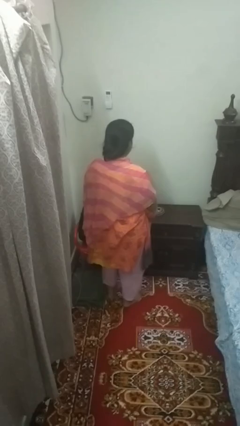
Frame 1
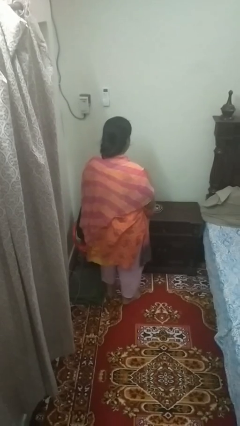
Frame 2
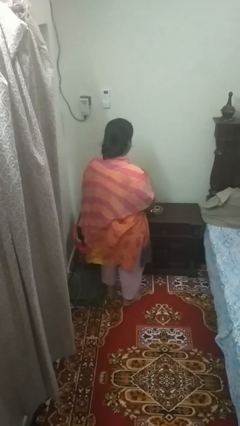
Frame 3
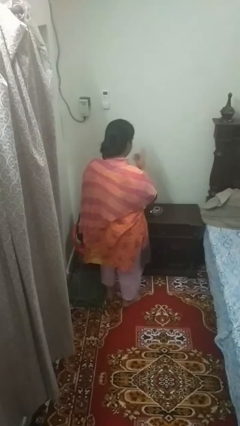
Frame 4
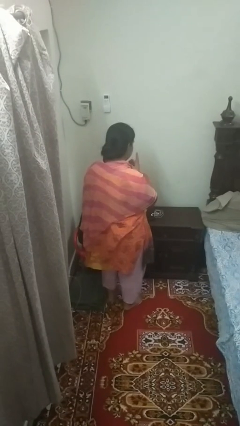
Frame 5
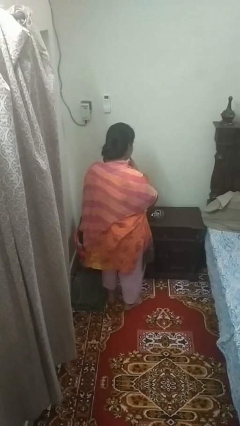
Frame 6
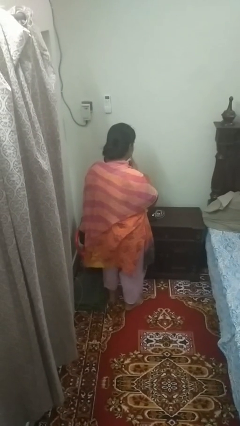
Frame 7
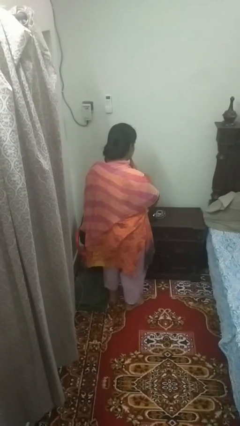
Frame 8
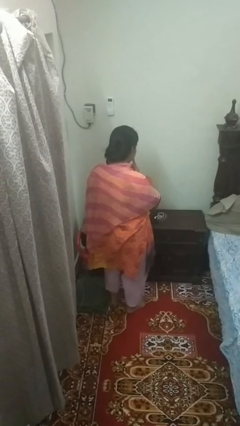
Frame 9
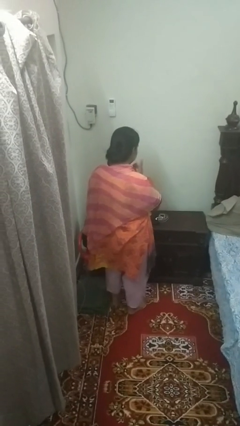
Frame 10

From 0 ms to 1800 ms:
person strokes chin

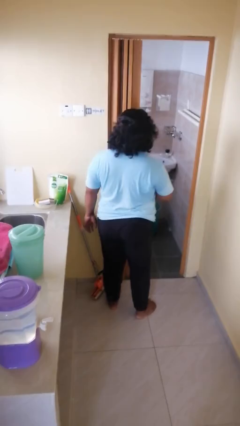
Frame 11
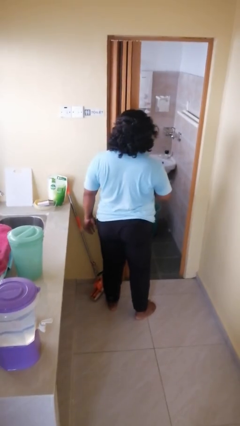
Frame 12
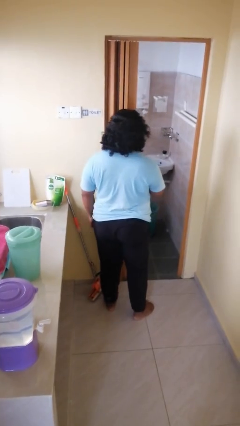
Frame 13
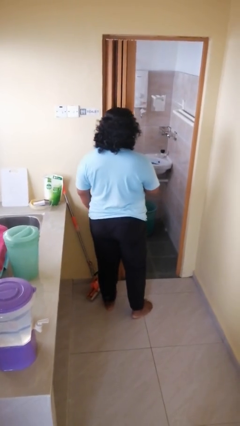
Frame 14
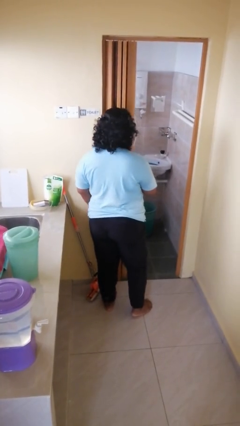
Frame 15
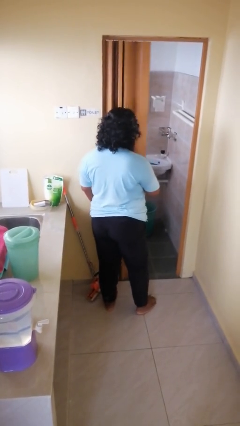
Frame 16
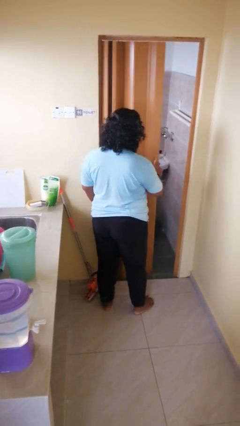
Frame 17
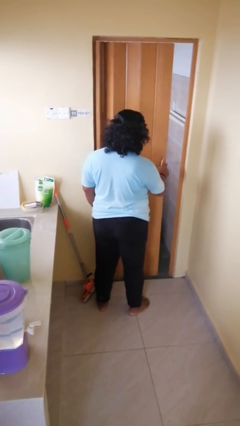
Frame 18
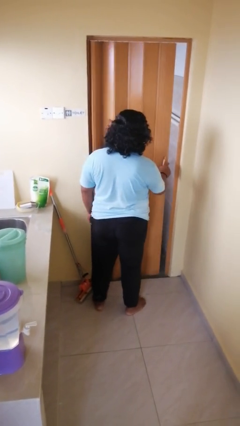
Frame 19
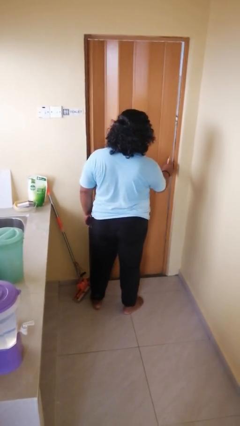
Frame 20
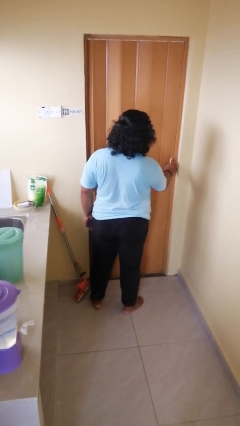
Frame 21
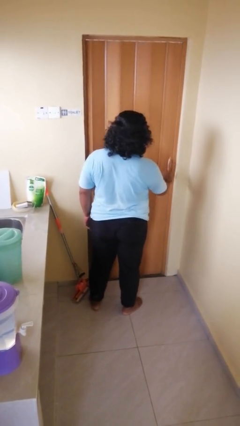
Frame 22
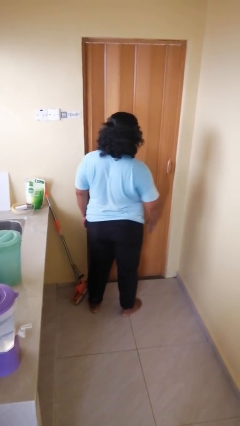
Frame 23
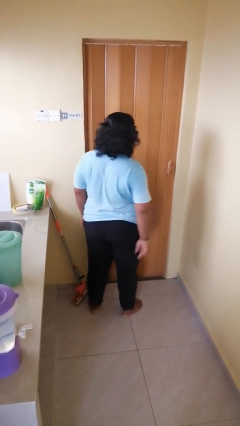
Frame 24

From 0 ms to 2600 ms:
person closes sliding door

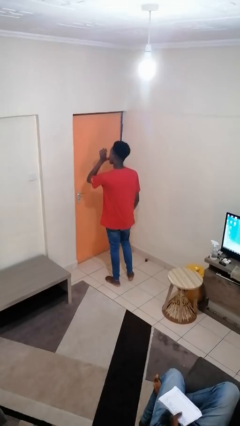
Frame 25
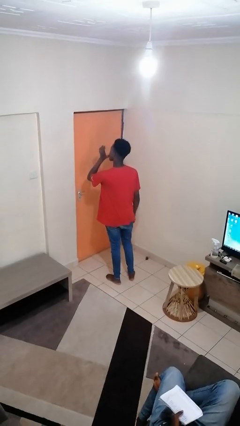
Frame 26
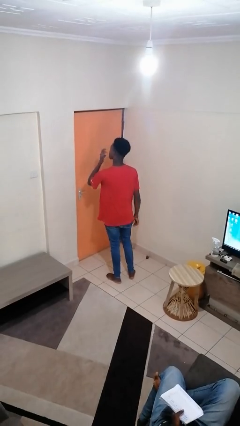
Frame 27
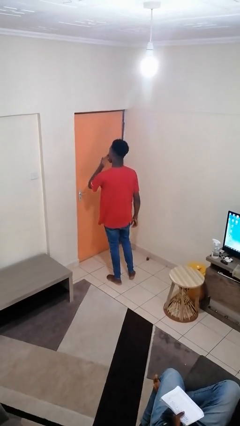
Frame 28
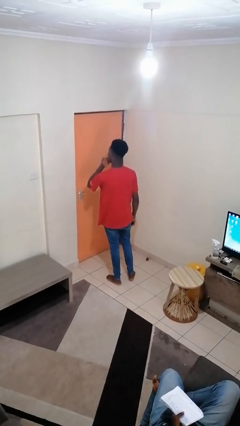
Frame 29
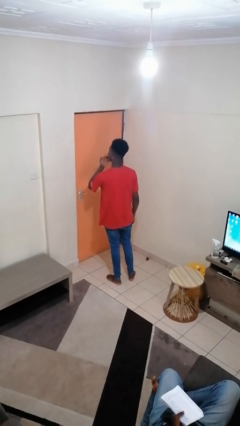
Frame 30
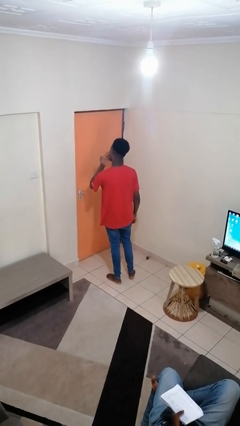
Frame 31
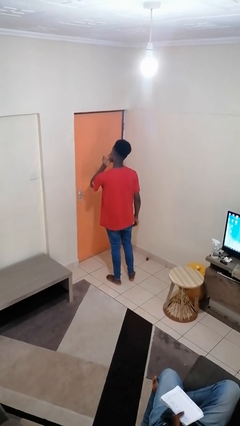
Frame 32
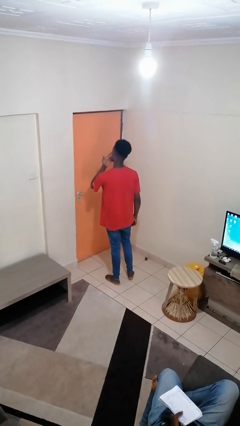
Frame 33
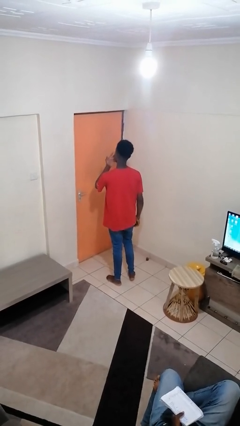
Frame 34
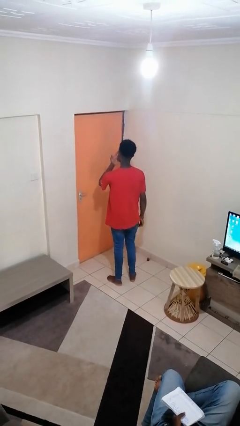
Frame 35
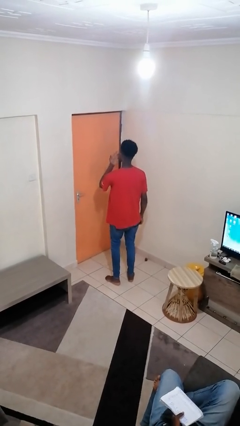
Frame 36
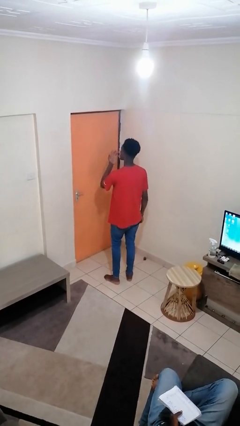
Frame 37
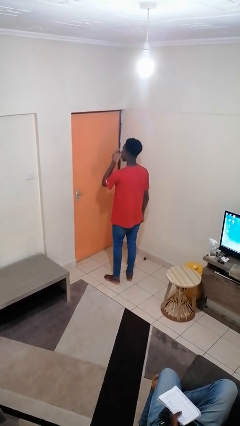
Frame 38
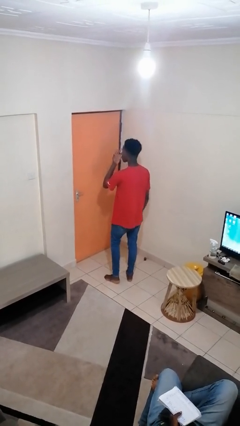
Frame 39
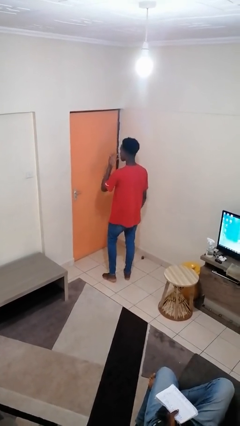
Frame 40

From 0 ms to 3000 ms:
person licks fingers

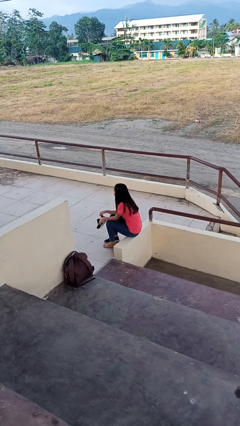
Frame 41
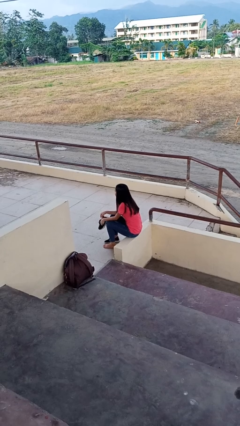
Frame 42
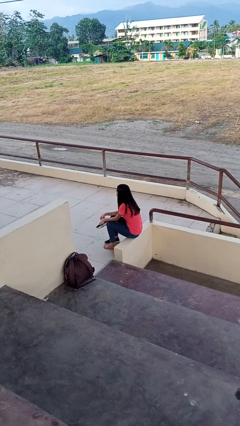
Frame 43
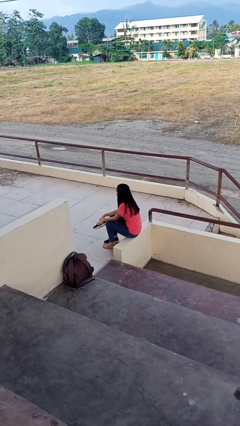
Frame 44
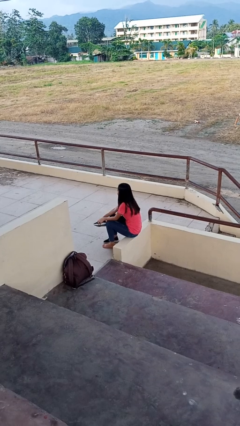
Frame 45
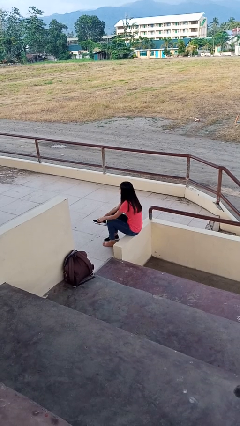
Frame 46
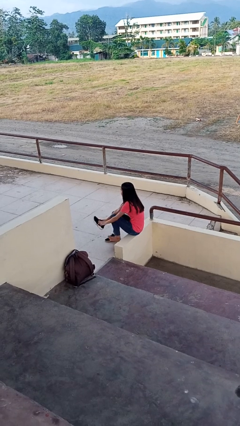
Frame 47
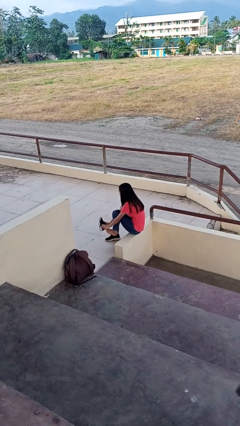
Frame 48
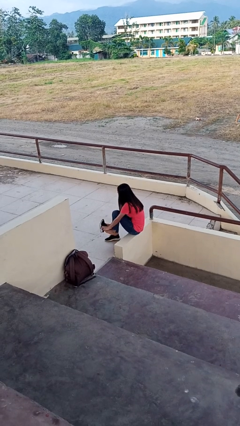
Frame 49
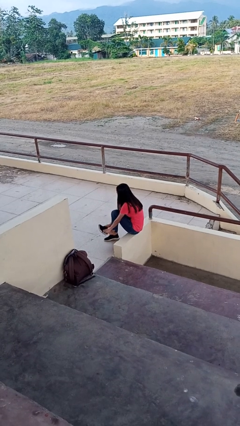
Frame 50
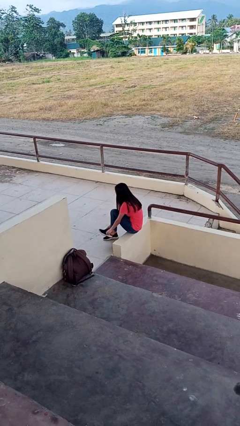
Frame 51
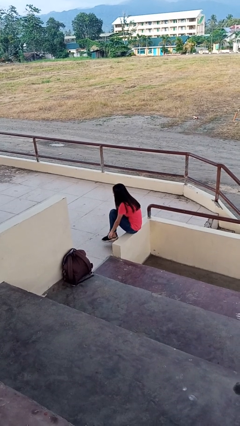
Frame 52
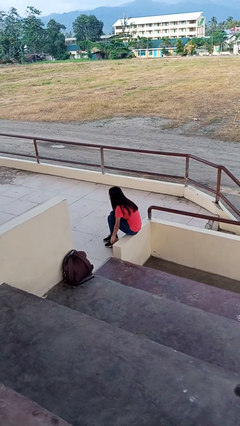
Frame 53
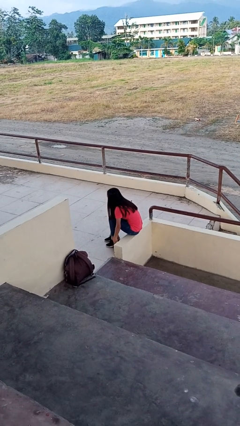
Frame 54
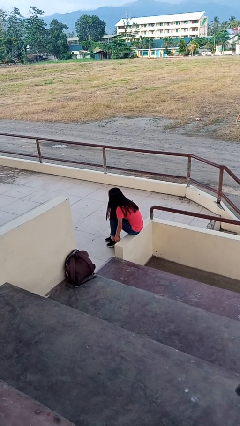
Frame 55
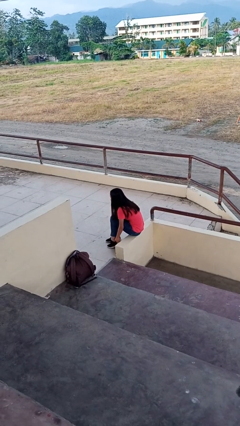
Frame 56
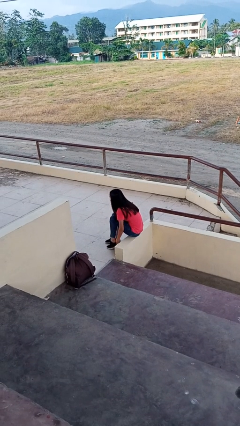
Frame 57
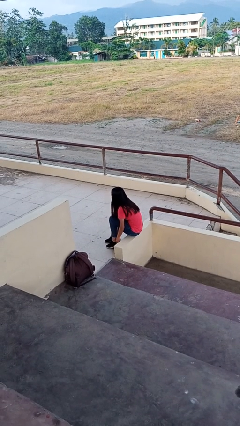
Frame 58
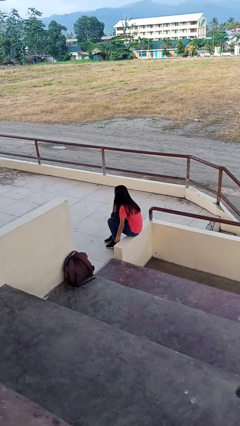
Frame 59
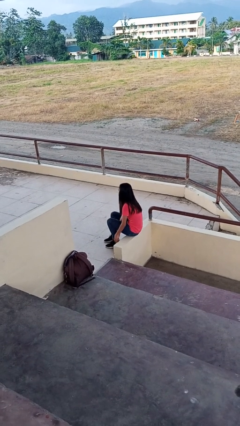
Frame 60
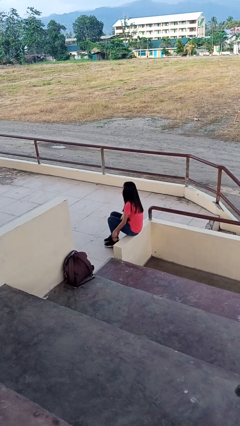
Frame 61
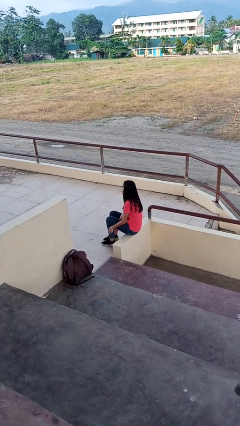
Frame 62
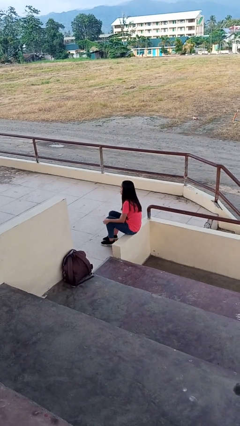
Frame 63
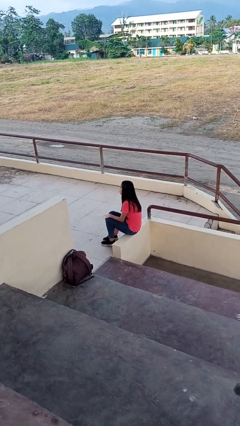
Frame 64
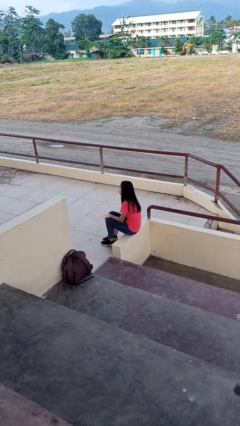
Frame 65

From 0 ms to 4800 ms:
person puts on shoes

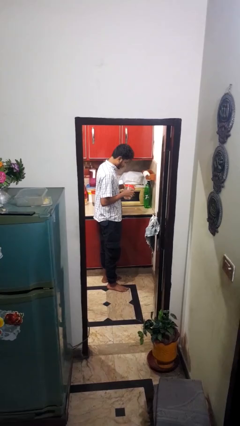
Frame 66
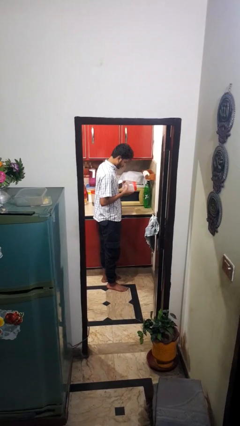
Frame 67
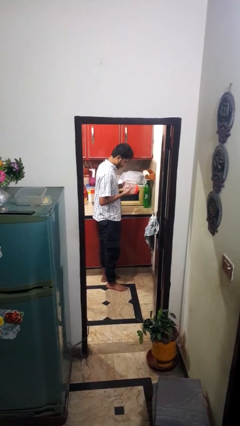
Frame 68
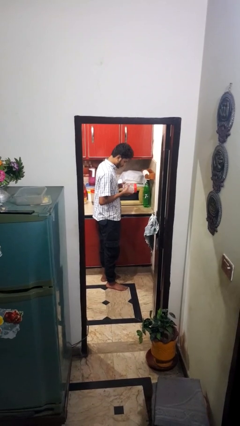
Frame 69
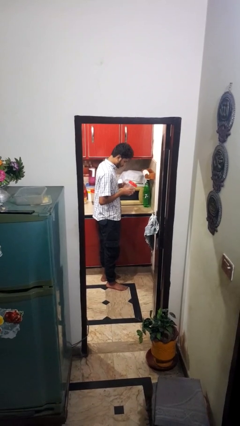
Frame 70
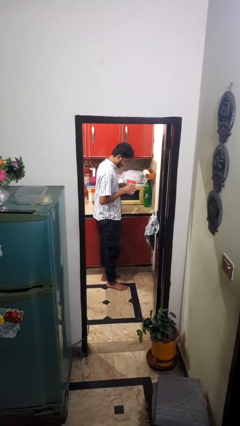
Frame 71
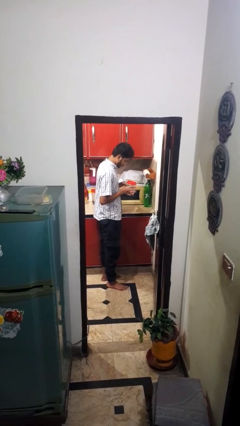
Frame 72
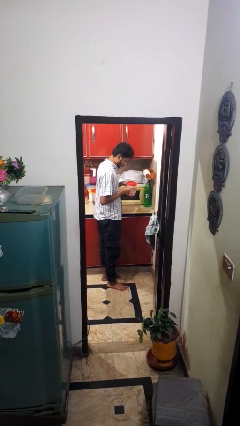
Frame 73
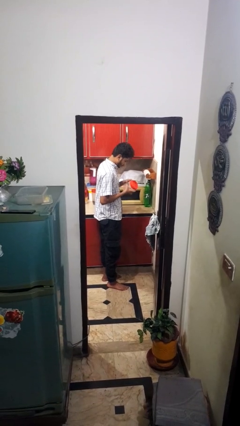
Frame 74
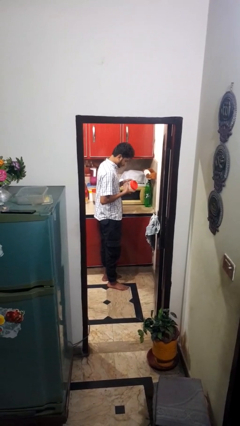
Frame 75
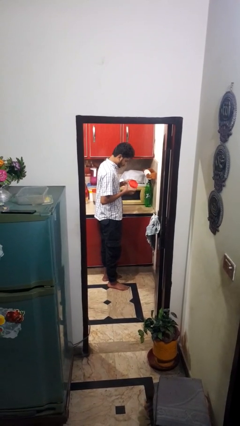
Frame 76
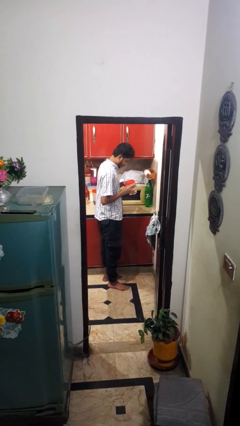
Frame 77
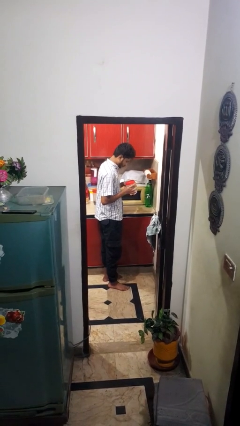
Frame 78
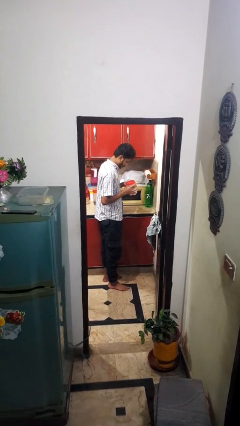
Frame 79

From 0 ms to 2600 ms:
person picks up object from countertop

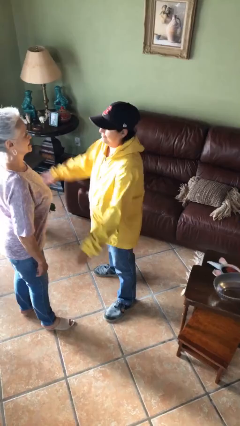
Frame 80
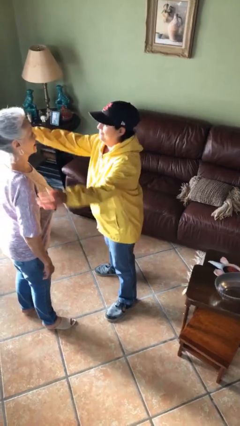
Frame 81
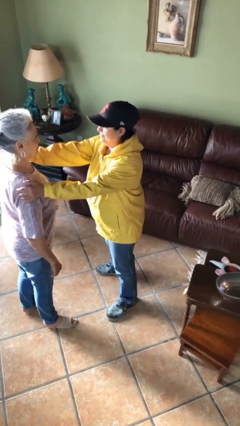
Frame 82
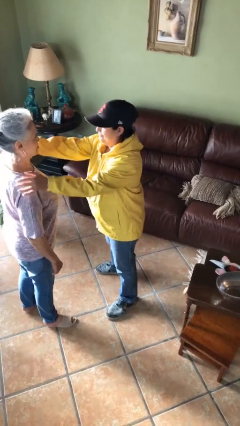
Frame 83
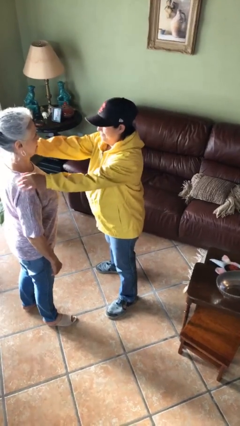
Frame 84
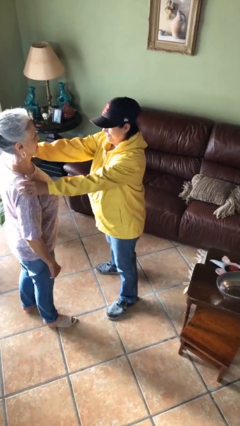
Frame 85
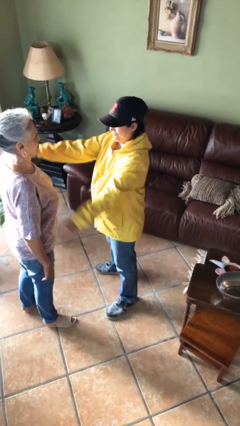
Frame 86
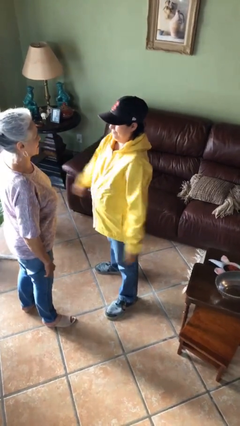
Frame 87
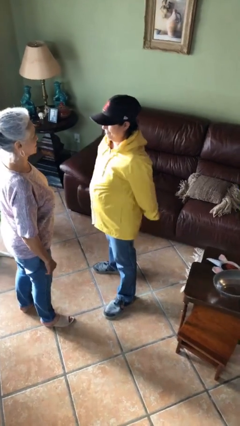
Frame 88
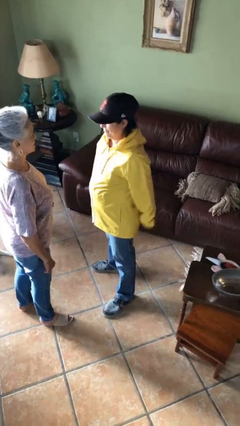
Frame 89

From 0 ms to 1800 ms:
person pounds shoulders of person

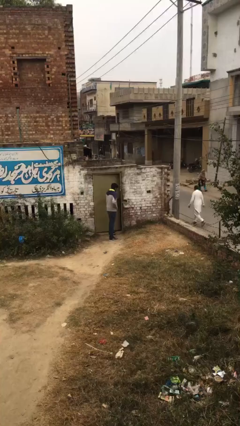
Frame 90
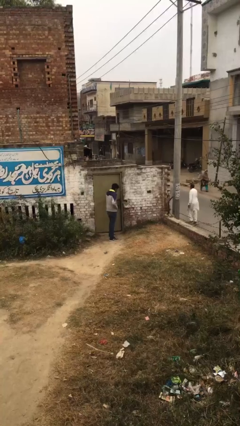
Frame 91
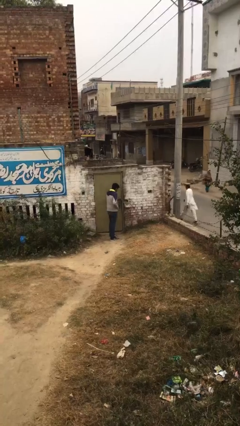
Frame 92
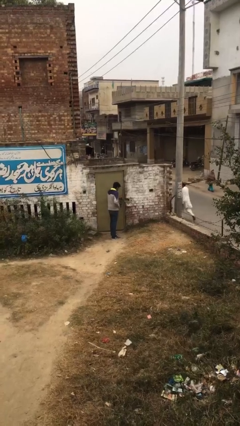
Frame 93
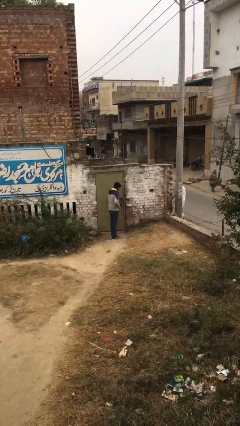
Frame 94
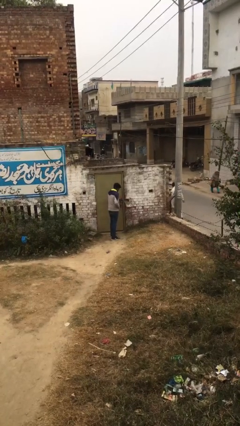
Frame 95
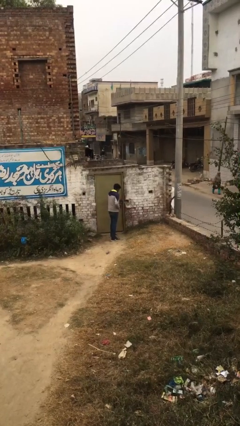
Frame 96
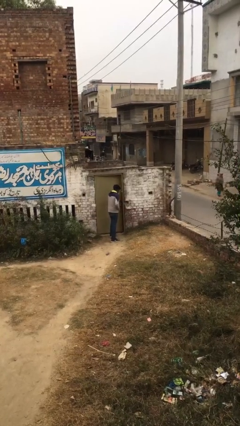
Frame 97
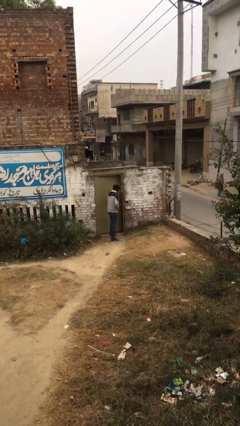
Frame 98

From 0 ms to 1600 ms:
person closes facility door
